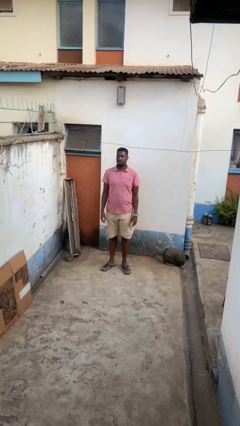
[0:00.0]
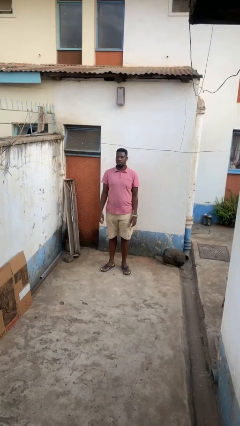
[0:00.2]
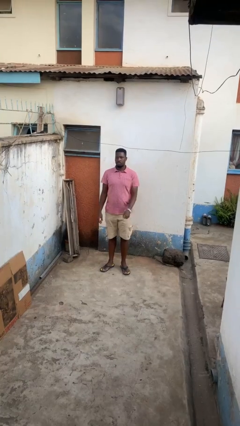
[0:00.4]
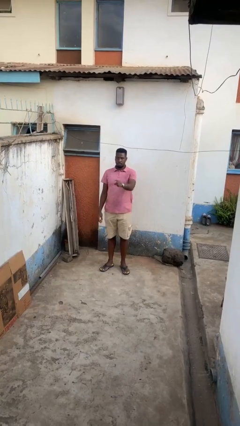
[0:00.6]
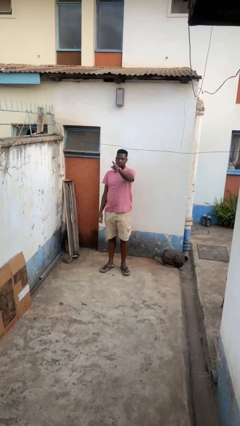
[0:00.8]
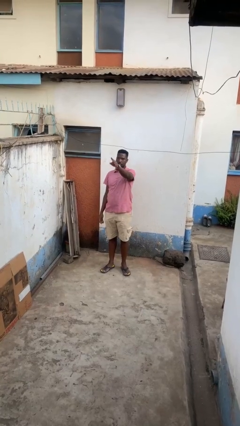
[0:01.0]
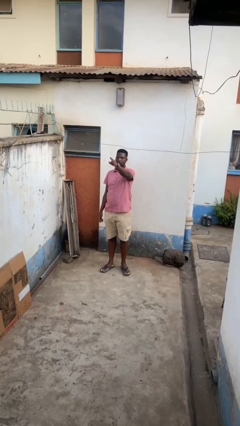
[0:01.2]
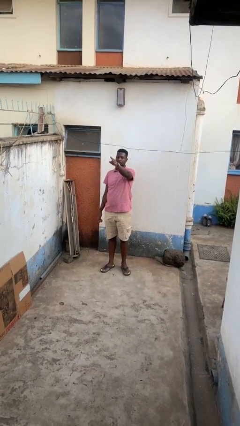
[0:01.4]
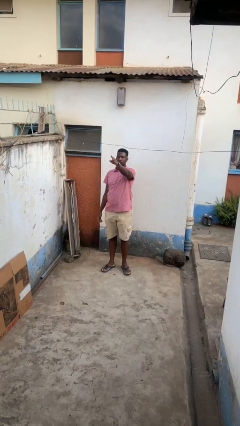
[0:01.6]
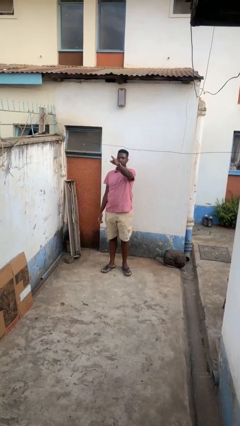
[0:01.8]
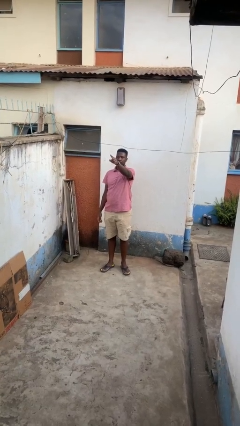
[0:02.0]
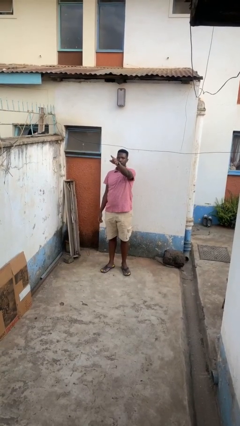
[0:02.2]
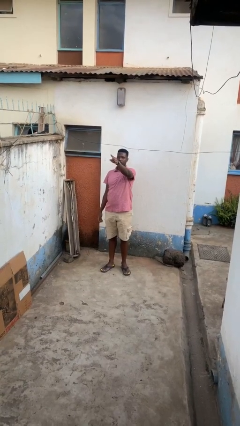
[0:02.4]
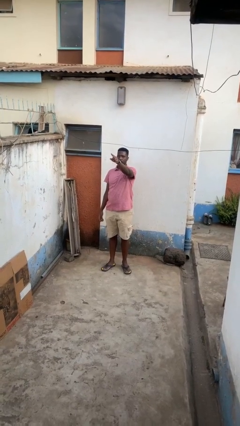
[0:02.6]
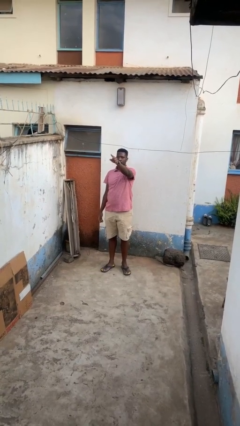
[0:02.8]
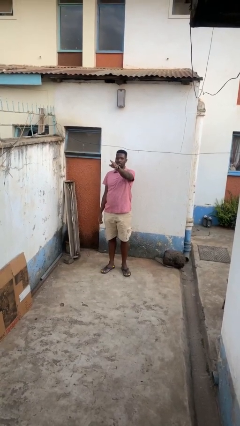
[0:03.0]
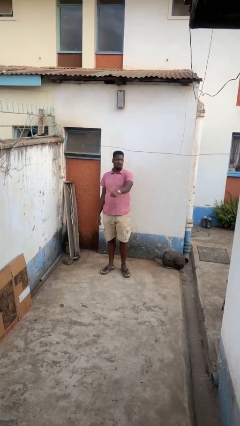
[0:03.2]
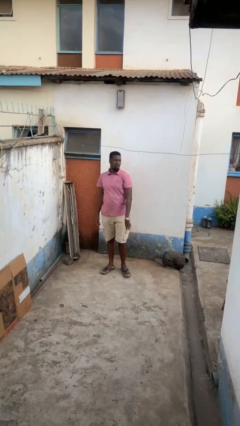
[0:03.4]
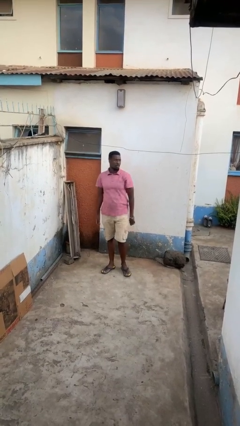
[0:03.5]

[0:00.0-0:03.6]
person points at person

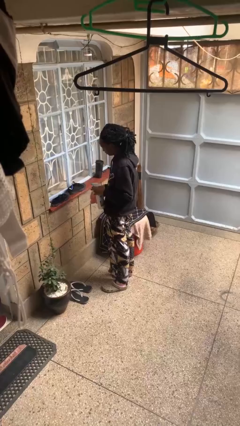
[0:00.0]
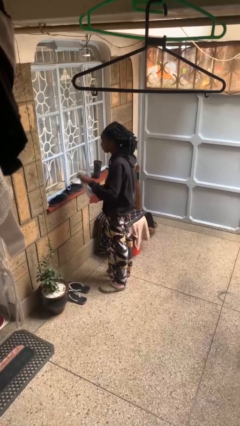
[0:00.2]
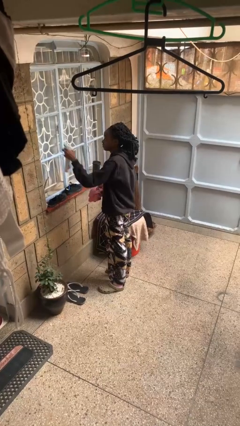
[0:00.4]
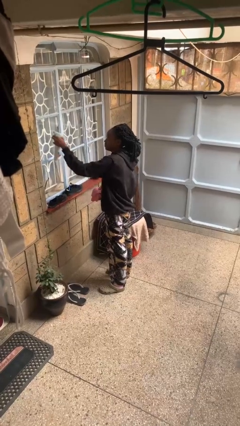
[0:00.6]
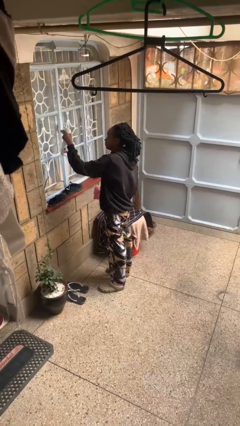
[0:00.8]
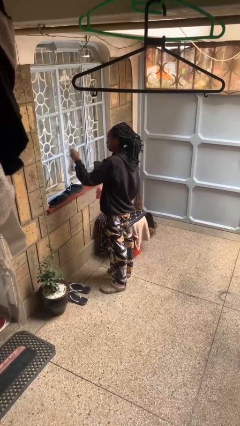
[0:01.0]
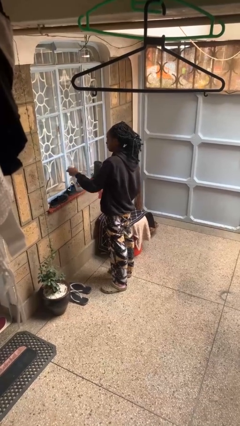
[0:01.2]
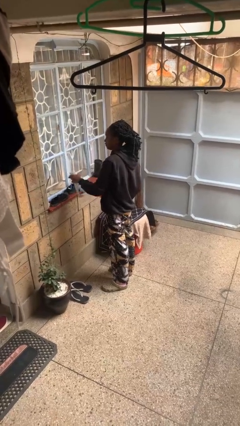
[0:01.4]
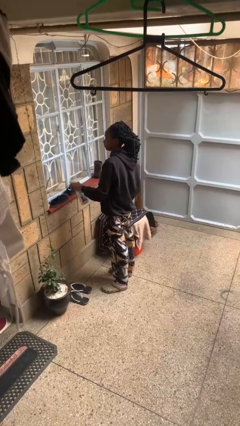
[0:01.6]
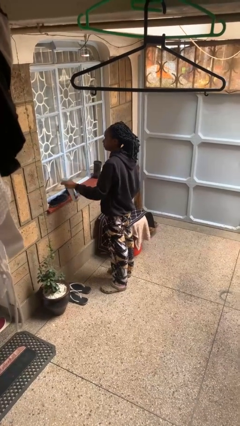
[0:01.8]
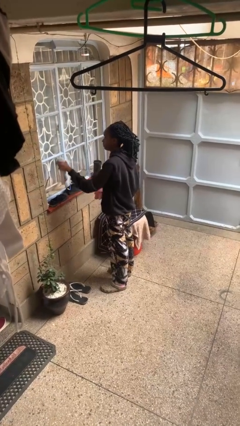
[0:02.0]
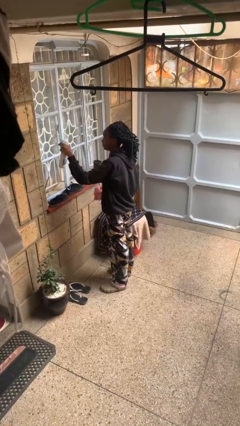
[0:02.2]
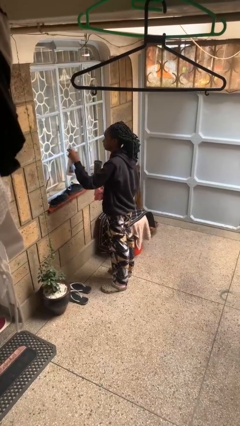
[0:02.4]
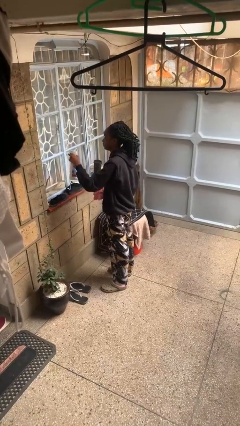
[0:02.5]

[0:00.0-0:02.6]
person sprays from bottle

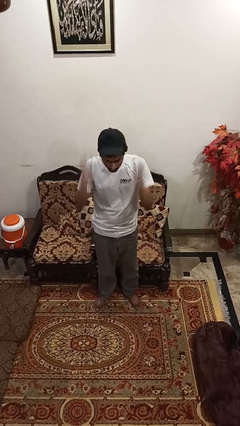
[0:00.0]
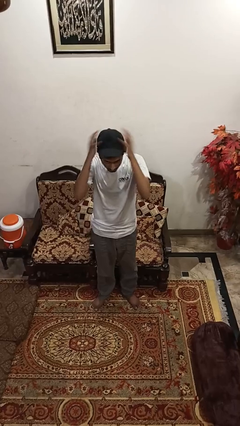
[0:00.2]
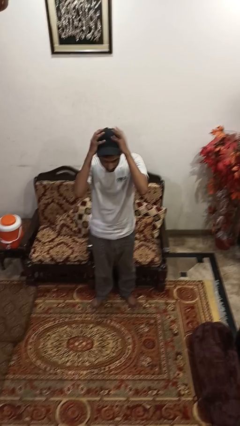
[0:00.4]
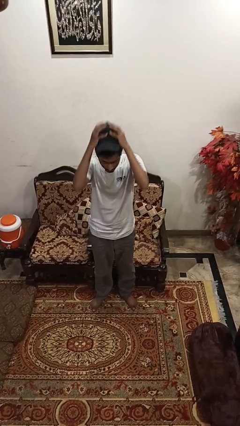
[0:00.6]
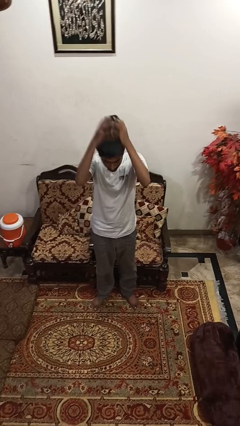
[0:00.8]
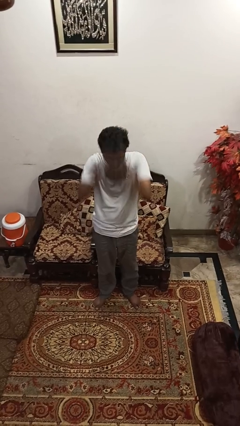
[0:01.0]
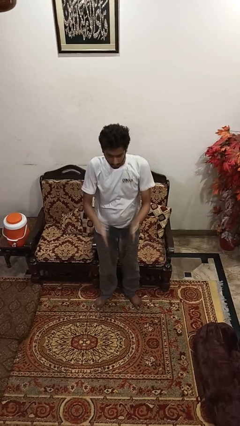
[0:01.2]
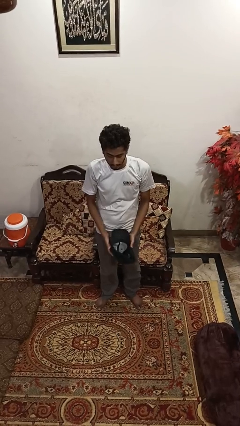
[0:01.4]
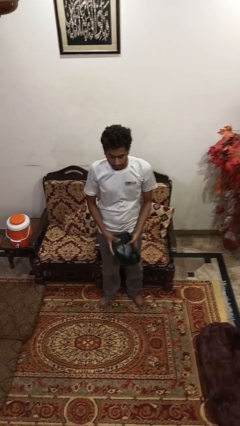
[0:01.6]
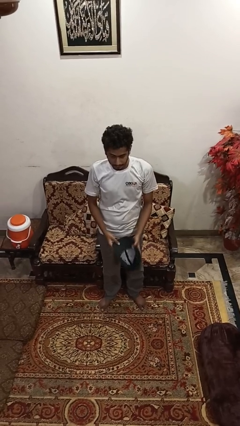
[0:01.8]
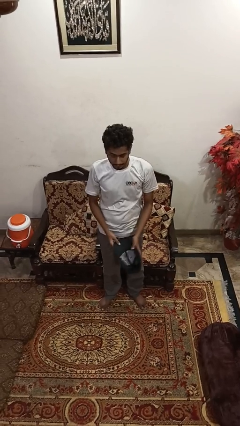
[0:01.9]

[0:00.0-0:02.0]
person takes off hat

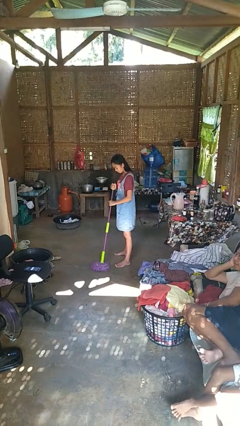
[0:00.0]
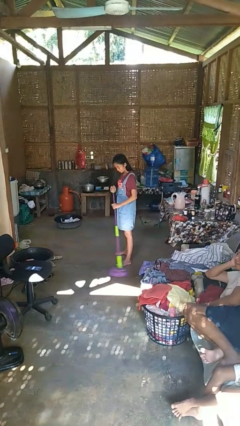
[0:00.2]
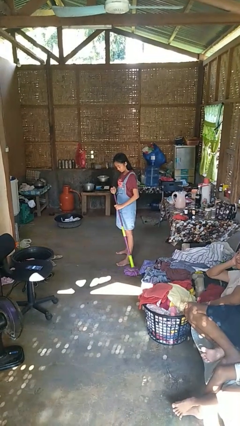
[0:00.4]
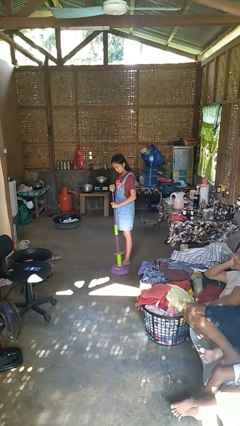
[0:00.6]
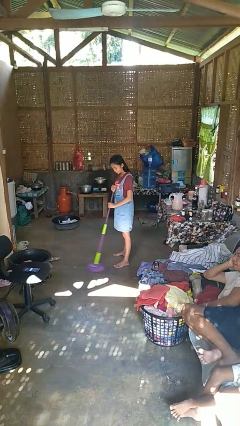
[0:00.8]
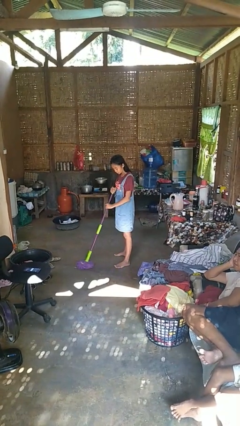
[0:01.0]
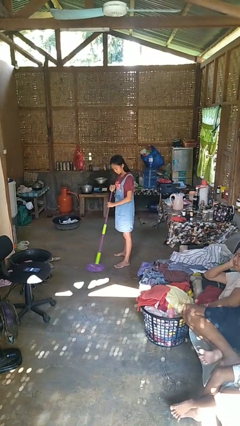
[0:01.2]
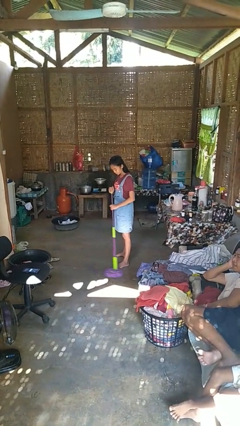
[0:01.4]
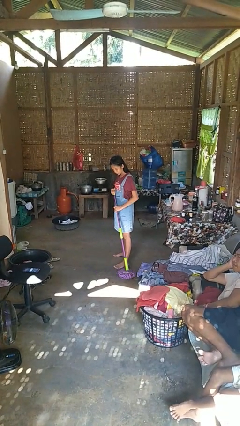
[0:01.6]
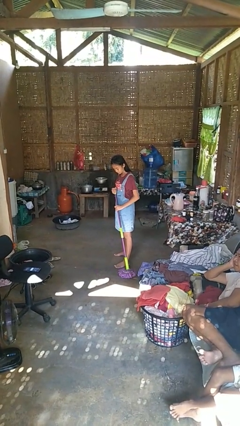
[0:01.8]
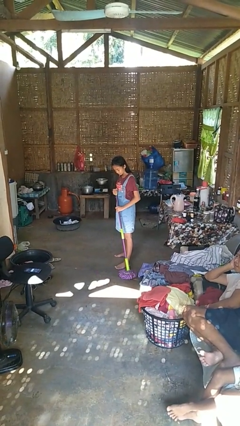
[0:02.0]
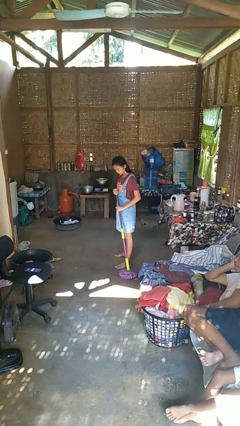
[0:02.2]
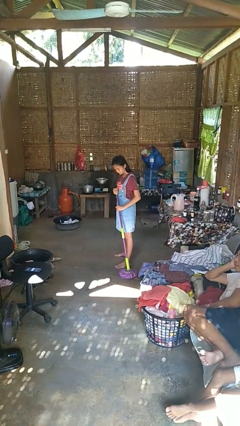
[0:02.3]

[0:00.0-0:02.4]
person mops

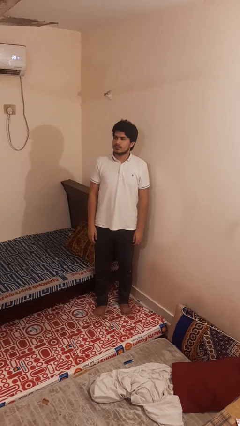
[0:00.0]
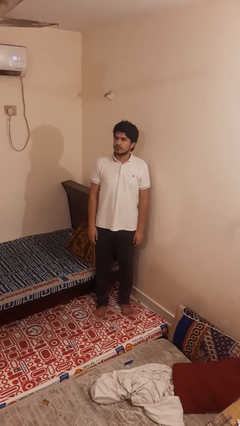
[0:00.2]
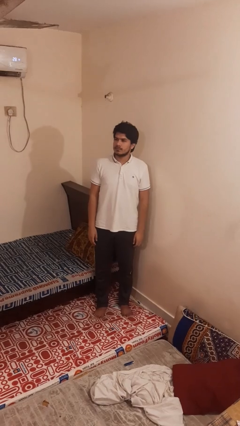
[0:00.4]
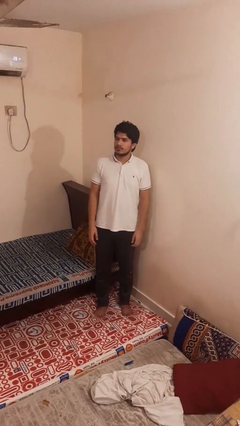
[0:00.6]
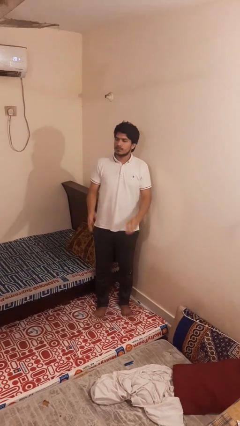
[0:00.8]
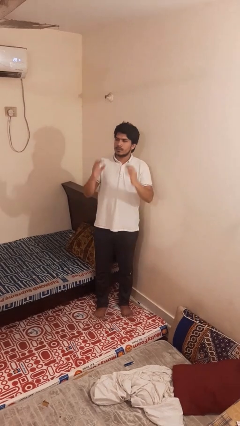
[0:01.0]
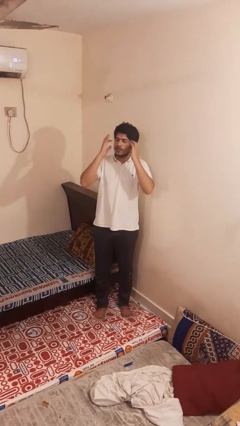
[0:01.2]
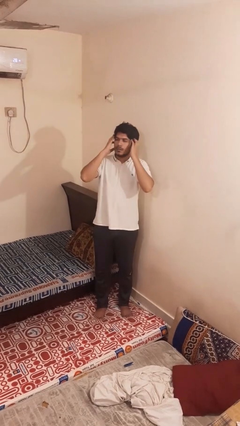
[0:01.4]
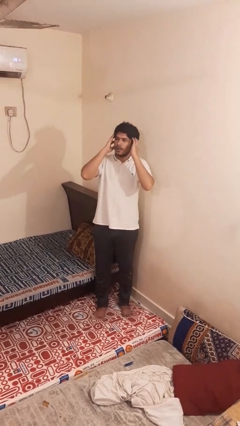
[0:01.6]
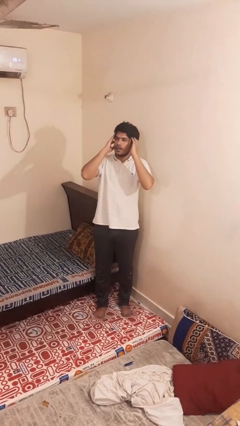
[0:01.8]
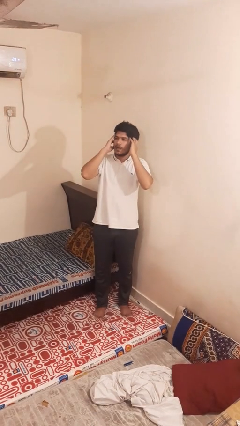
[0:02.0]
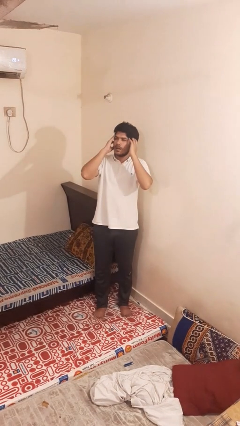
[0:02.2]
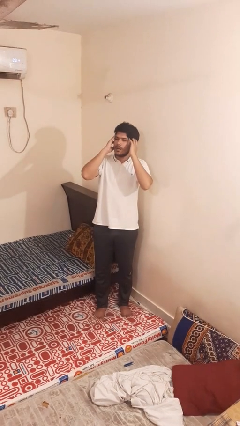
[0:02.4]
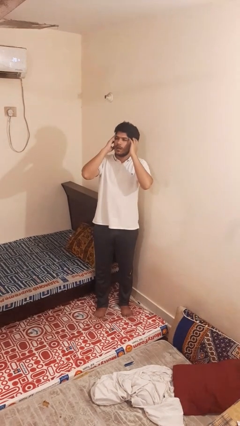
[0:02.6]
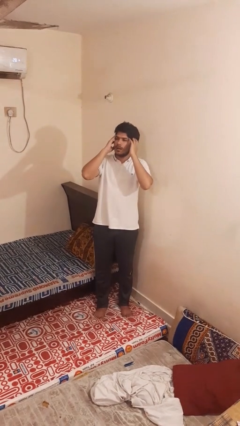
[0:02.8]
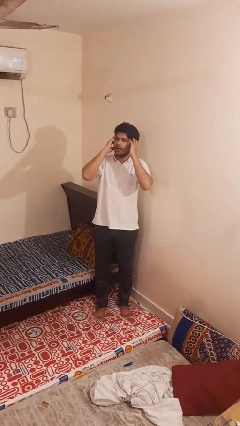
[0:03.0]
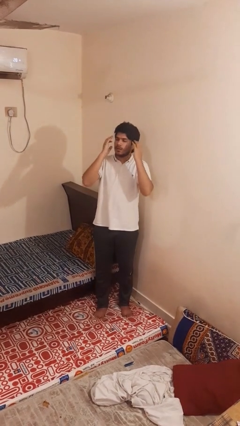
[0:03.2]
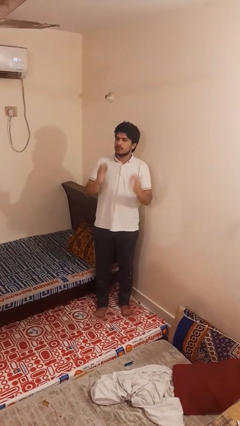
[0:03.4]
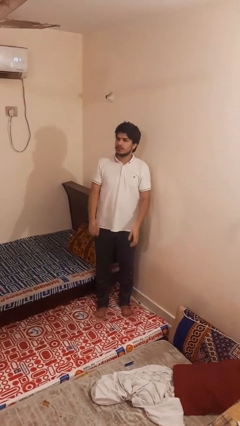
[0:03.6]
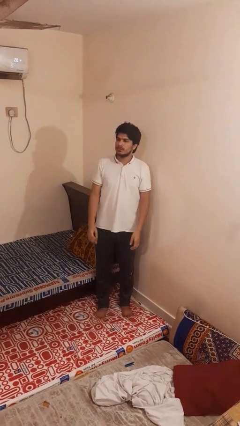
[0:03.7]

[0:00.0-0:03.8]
person puts fingers in ear

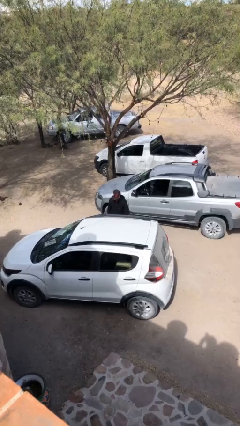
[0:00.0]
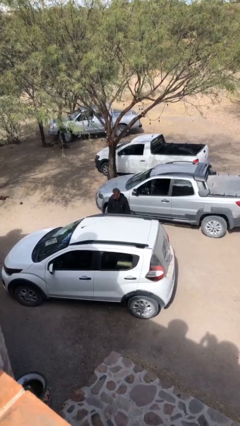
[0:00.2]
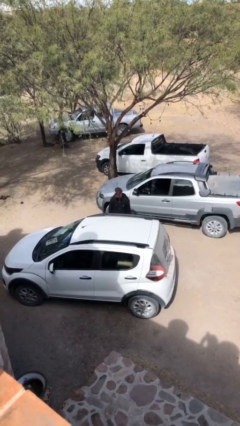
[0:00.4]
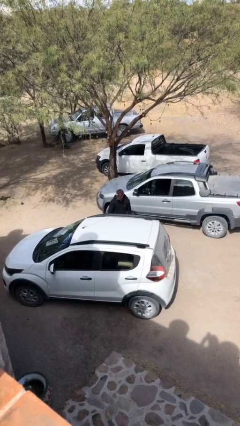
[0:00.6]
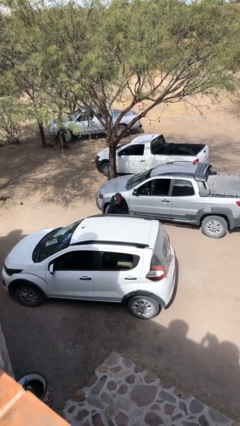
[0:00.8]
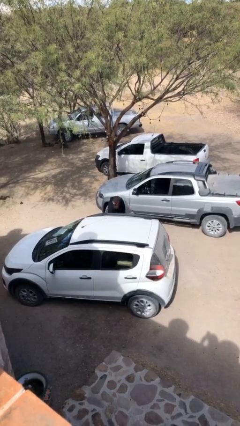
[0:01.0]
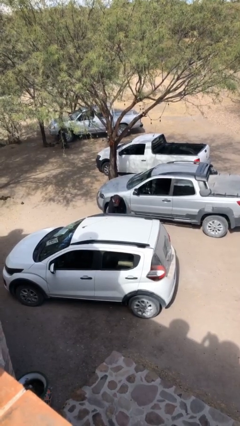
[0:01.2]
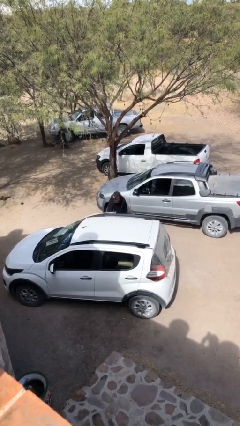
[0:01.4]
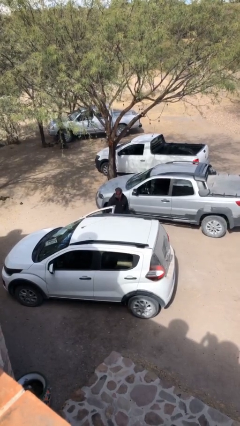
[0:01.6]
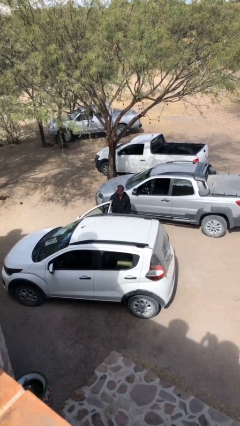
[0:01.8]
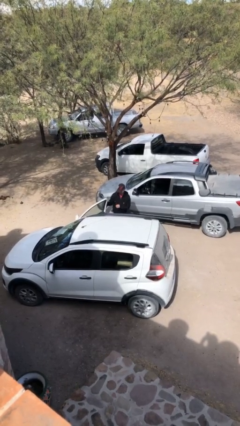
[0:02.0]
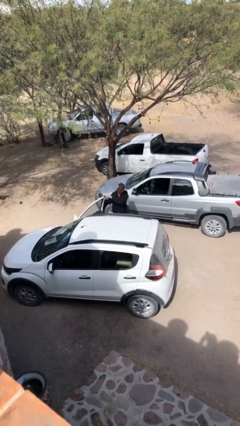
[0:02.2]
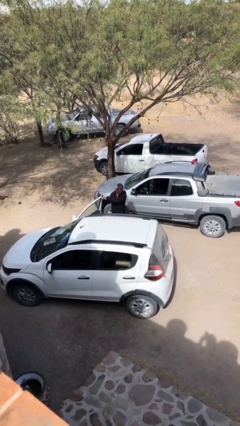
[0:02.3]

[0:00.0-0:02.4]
person opens car door
